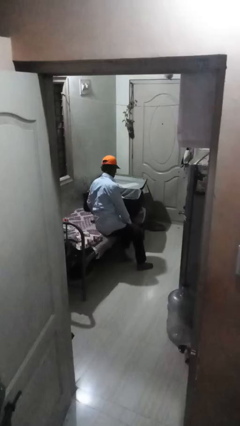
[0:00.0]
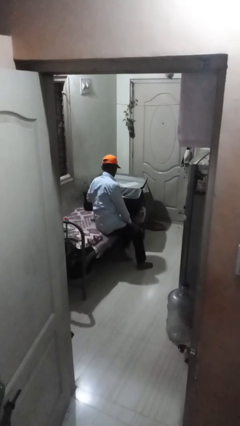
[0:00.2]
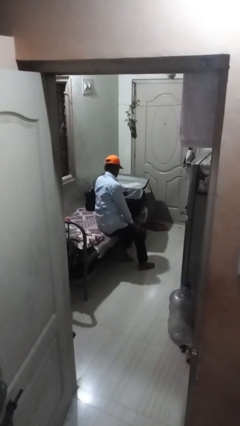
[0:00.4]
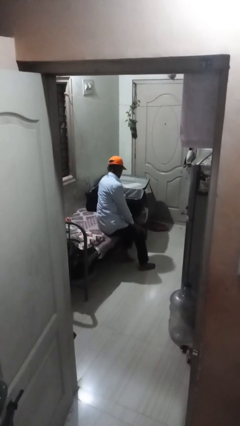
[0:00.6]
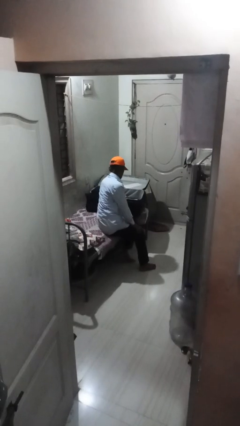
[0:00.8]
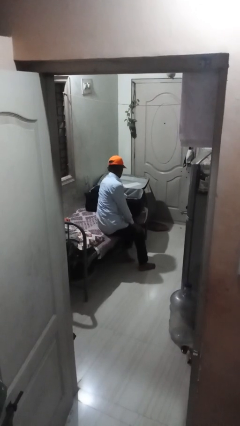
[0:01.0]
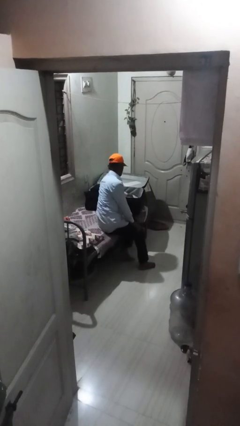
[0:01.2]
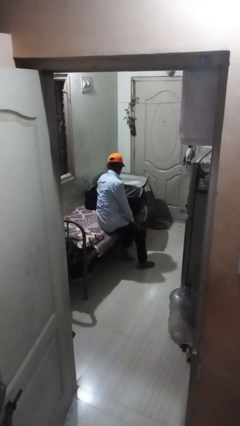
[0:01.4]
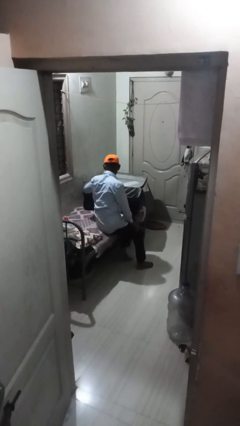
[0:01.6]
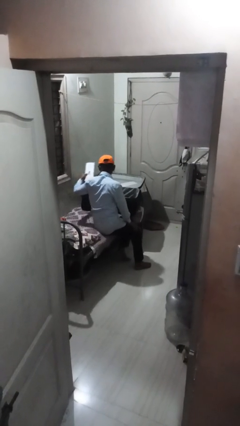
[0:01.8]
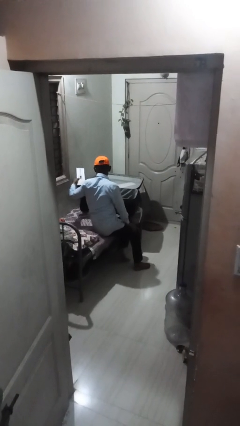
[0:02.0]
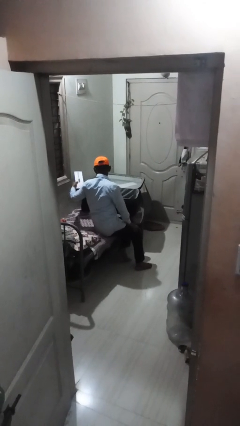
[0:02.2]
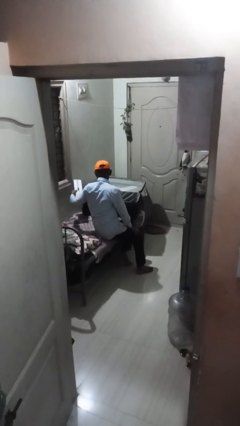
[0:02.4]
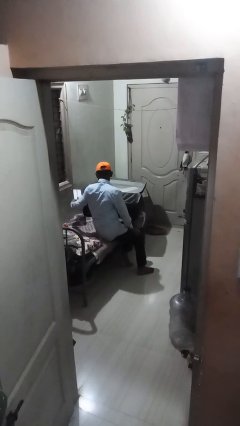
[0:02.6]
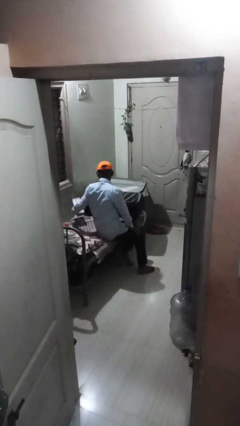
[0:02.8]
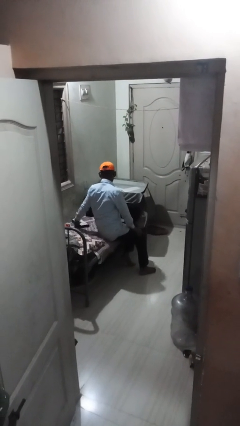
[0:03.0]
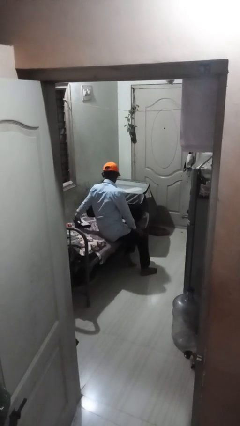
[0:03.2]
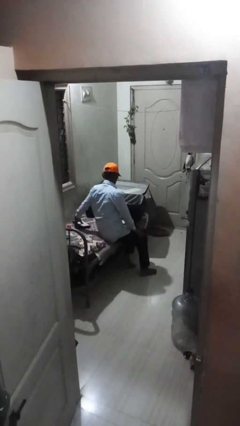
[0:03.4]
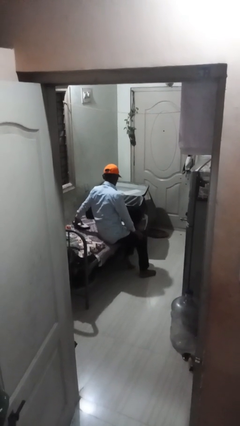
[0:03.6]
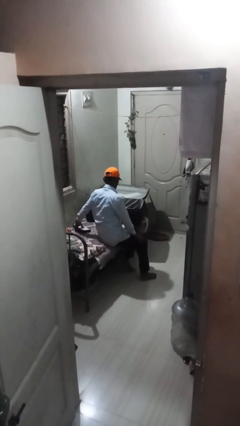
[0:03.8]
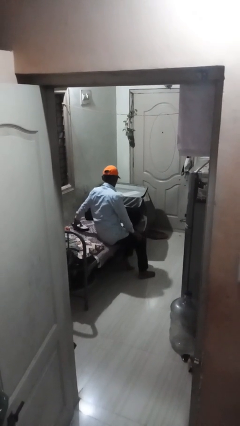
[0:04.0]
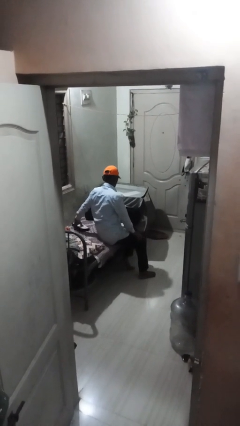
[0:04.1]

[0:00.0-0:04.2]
person unloads clothes from suitcase

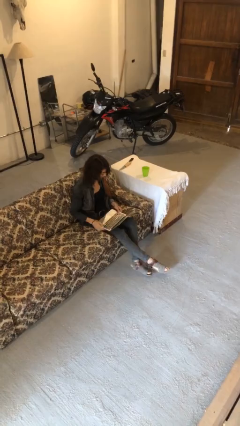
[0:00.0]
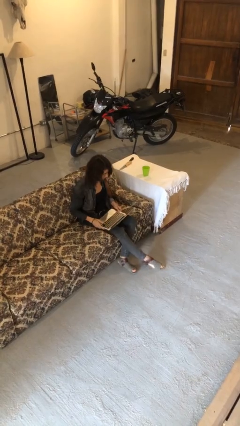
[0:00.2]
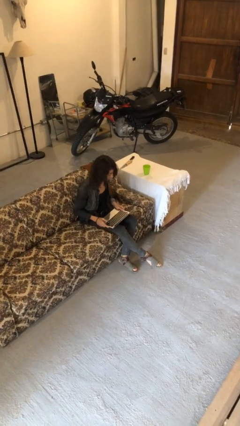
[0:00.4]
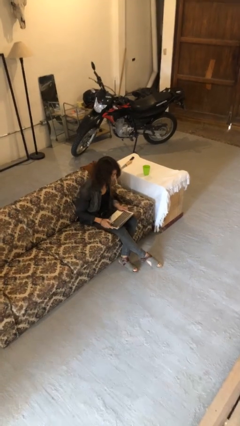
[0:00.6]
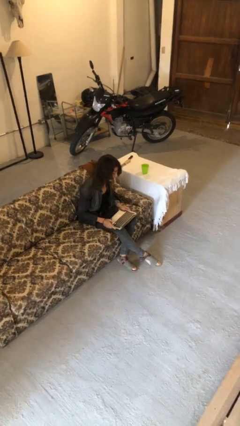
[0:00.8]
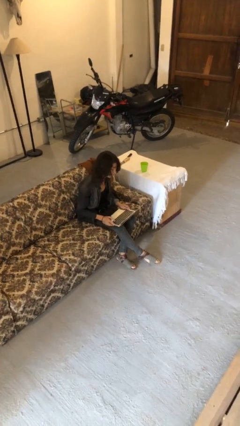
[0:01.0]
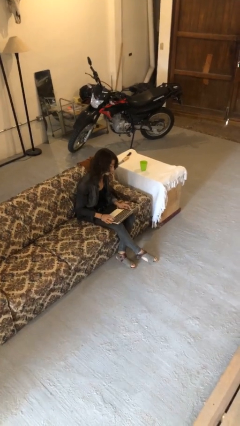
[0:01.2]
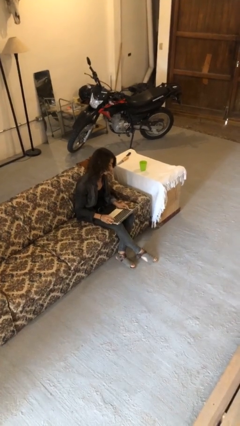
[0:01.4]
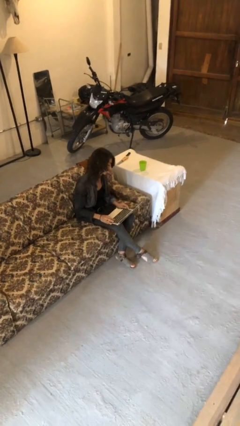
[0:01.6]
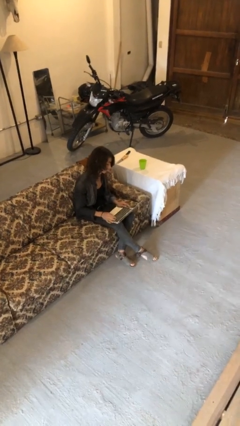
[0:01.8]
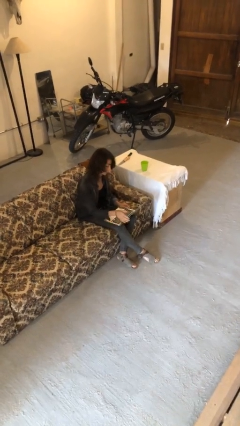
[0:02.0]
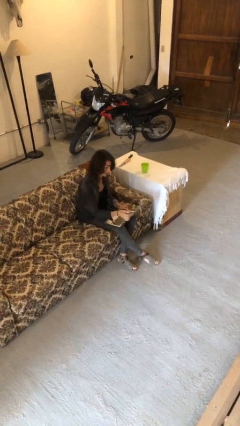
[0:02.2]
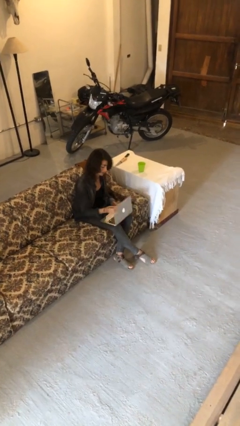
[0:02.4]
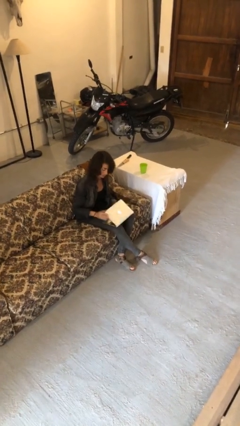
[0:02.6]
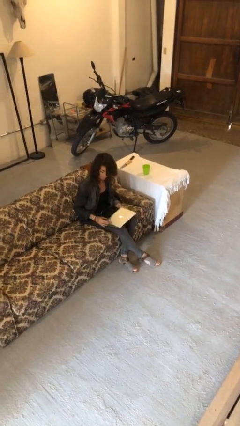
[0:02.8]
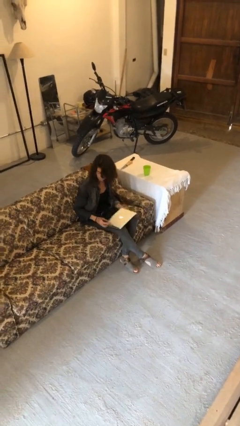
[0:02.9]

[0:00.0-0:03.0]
person opens laptop

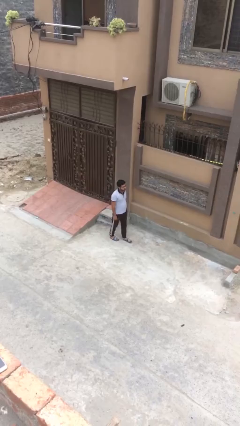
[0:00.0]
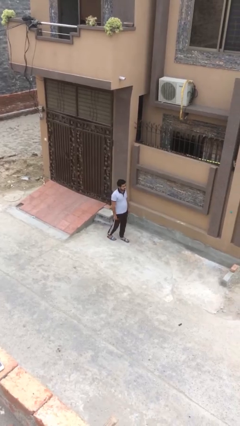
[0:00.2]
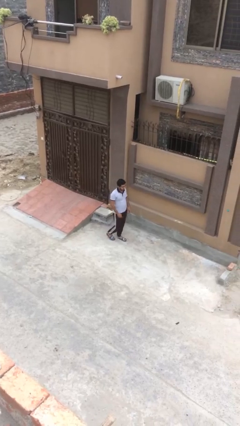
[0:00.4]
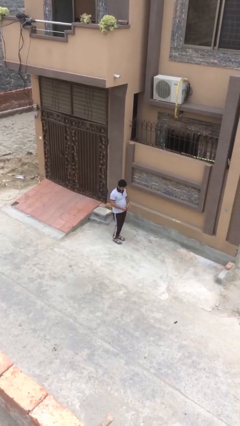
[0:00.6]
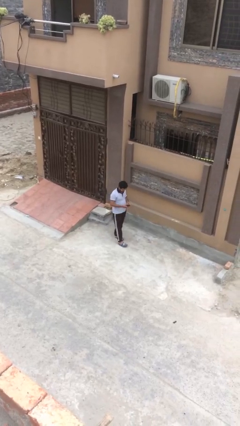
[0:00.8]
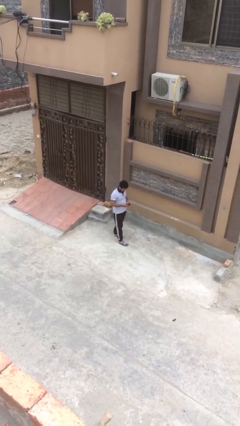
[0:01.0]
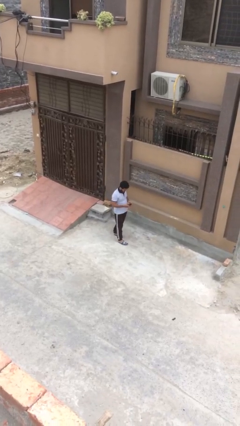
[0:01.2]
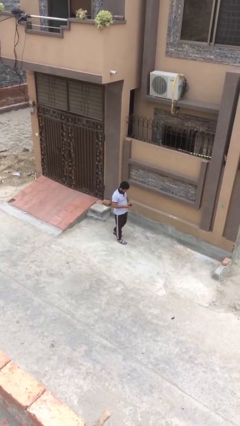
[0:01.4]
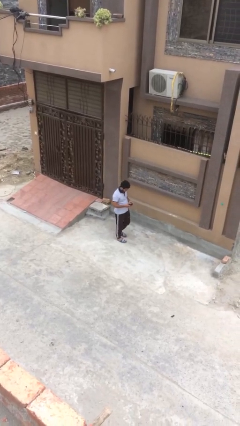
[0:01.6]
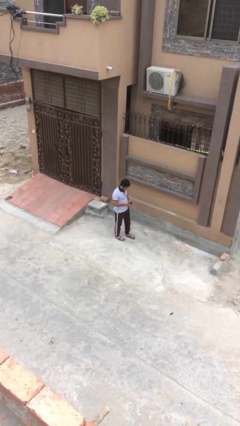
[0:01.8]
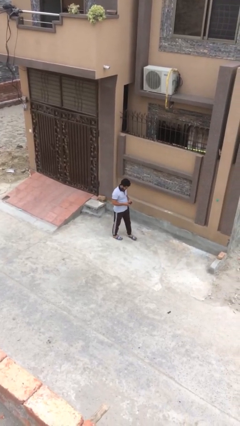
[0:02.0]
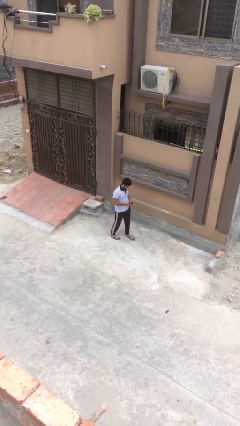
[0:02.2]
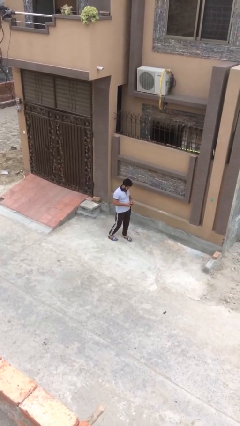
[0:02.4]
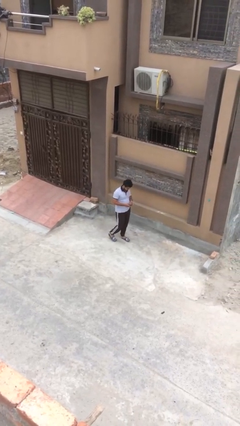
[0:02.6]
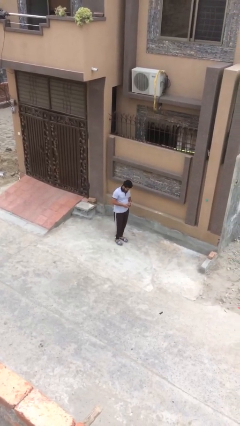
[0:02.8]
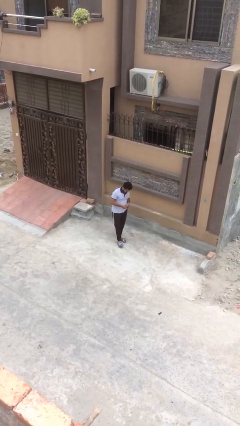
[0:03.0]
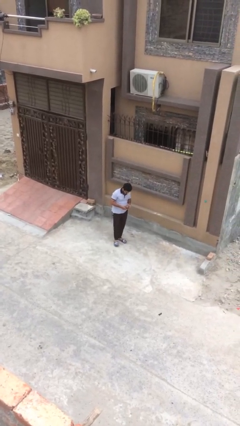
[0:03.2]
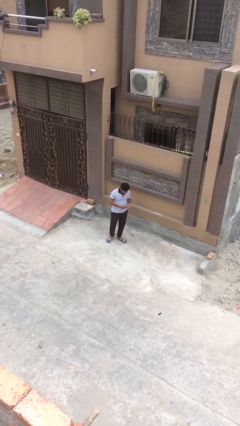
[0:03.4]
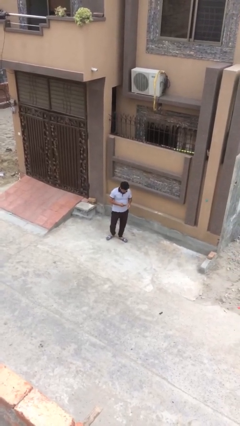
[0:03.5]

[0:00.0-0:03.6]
person texts on phone

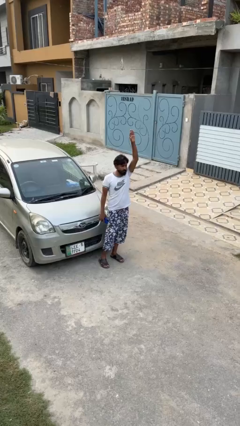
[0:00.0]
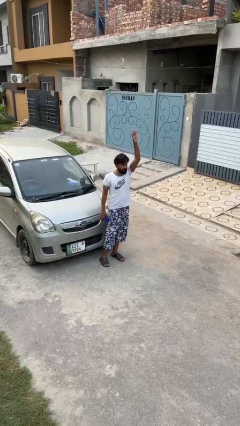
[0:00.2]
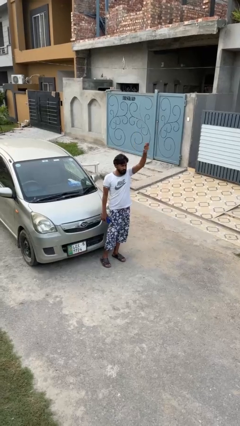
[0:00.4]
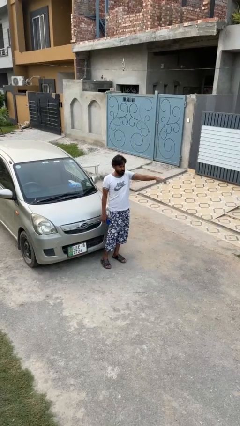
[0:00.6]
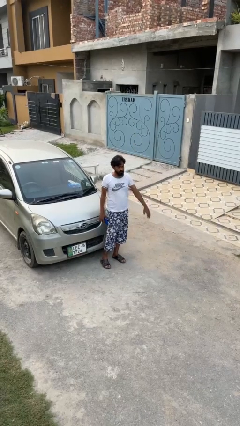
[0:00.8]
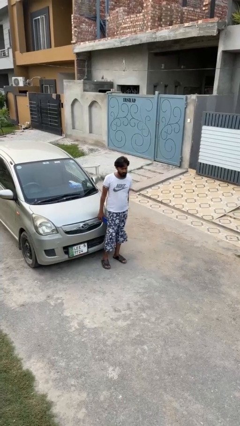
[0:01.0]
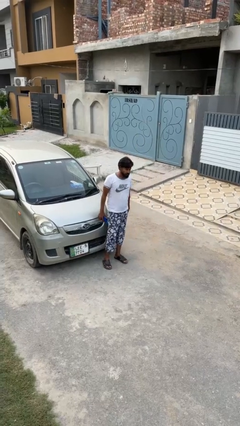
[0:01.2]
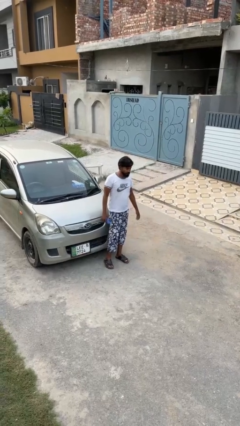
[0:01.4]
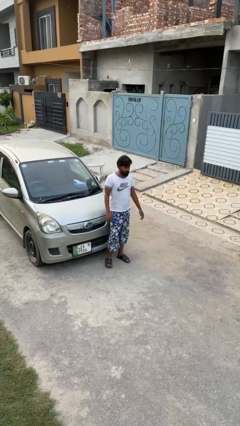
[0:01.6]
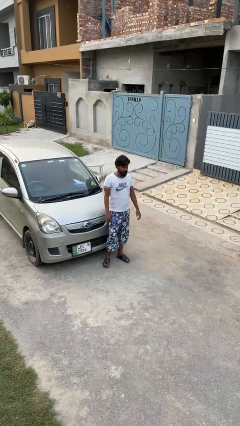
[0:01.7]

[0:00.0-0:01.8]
person gestures lower hand

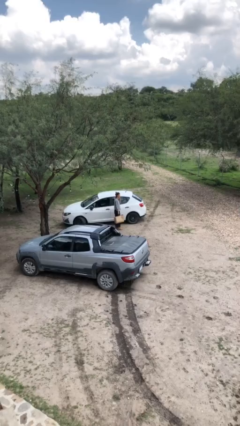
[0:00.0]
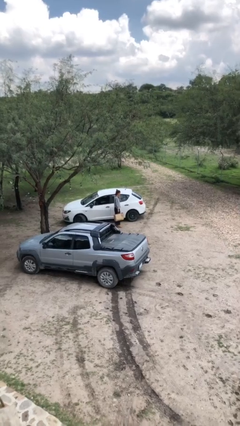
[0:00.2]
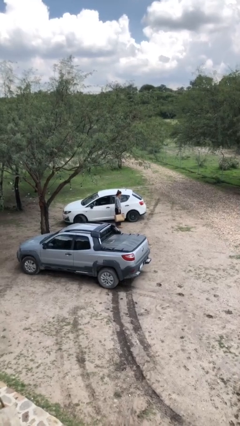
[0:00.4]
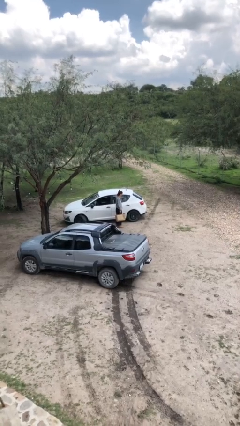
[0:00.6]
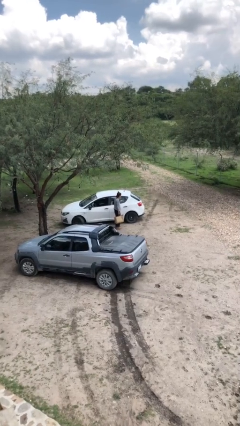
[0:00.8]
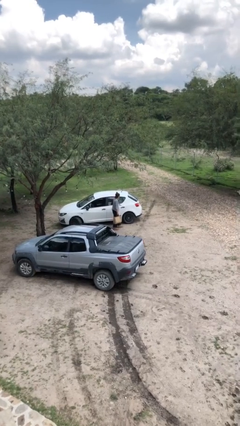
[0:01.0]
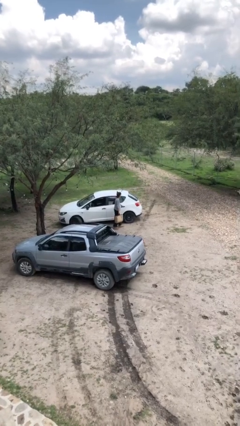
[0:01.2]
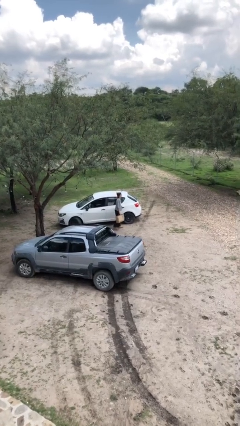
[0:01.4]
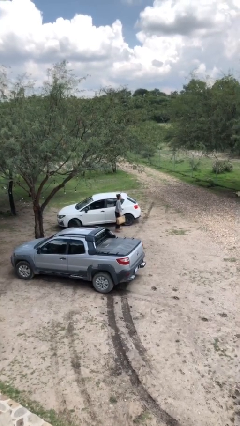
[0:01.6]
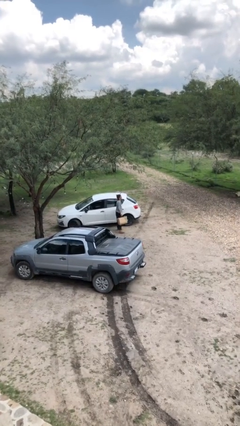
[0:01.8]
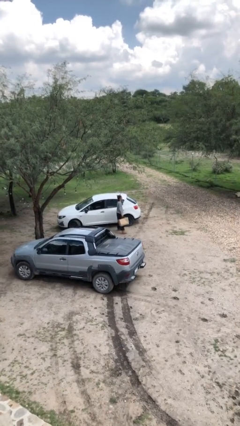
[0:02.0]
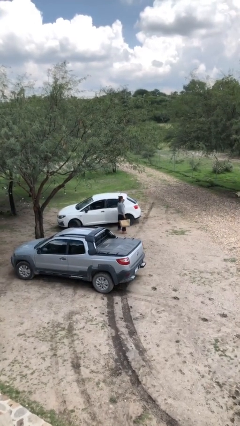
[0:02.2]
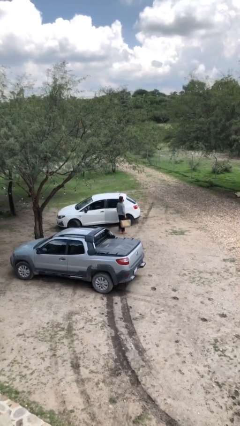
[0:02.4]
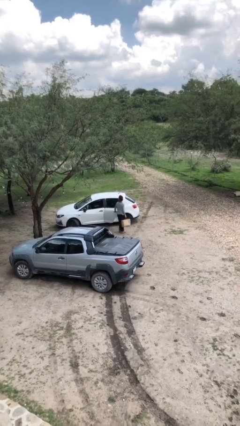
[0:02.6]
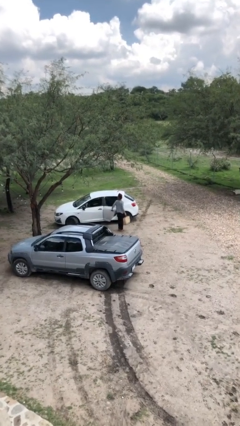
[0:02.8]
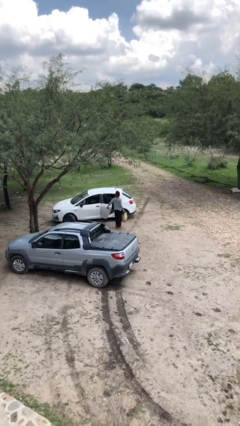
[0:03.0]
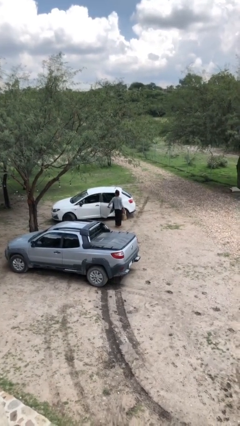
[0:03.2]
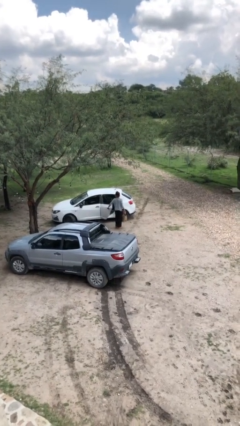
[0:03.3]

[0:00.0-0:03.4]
person opens car door

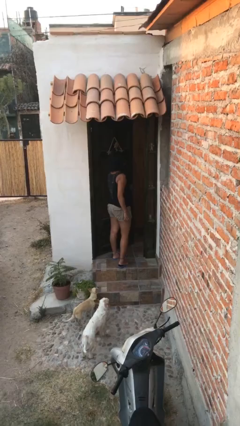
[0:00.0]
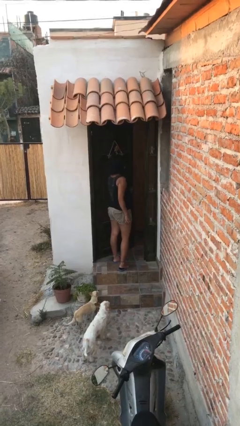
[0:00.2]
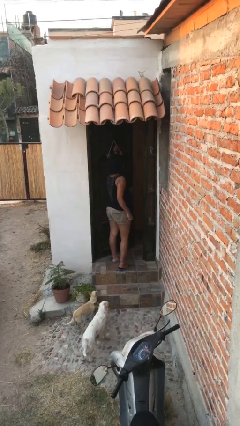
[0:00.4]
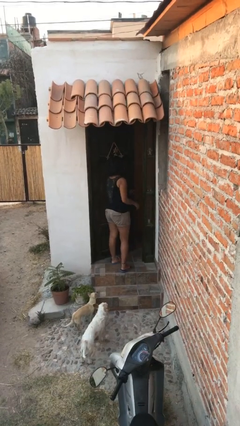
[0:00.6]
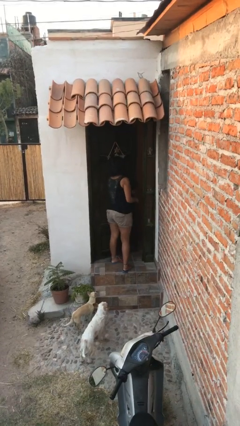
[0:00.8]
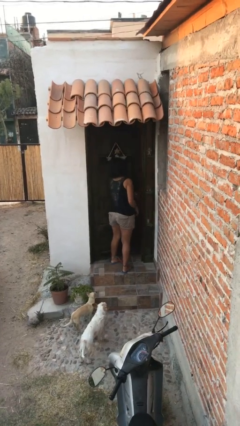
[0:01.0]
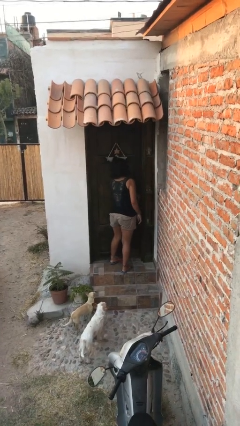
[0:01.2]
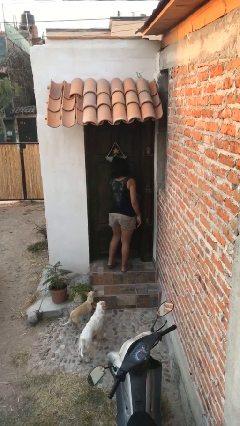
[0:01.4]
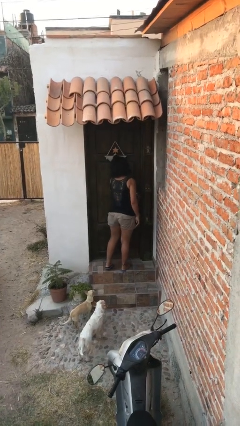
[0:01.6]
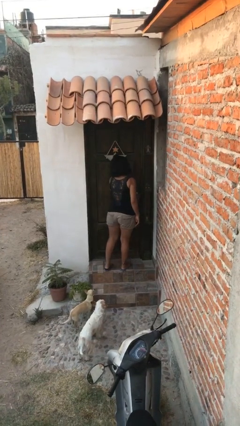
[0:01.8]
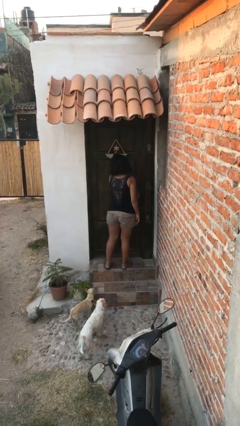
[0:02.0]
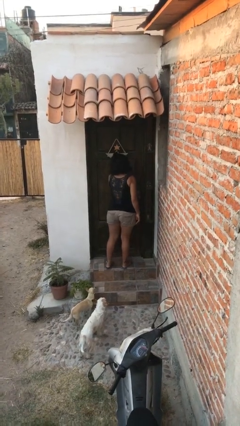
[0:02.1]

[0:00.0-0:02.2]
person closes facility door
